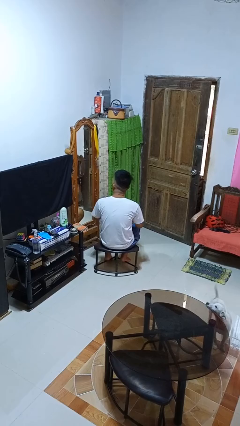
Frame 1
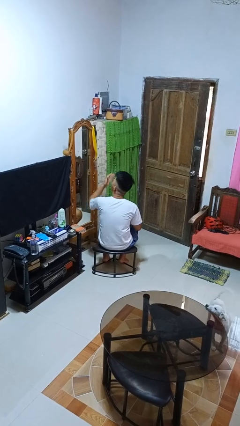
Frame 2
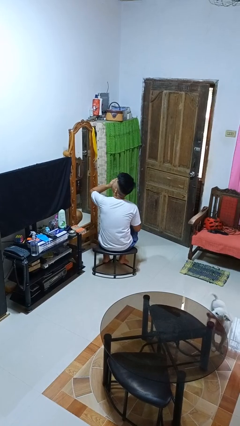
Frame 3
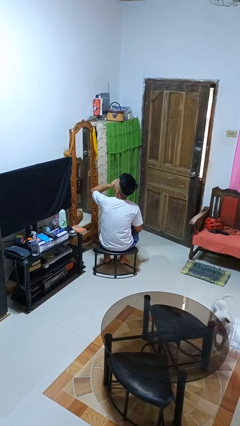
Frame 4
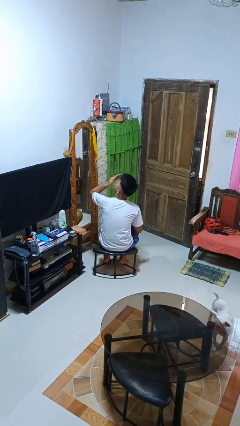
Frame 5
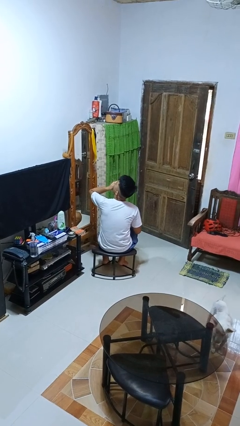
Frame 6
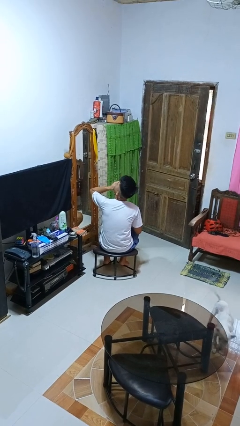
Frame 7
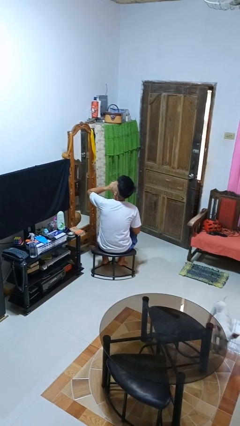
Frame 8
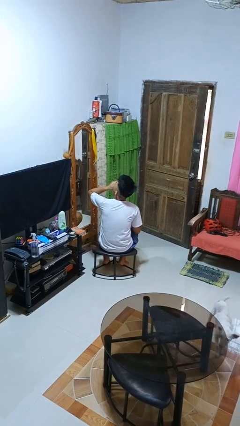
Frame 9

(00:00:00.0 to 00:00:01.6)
person yawns

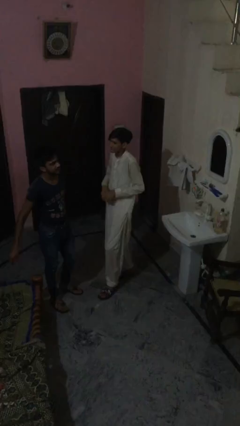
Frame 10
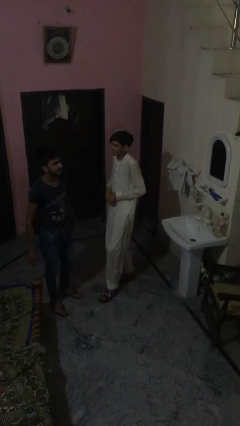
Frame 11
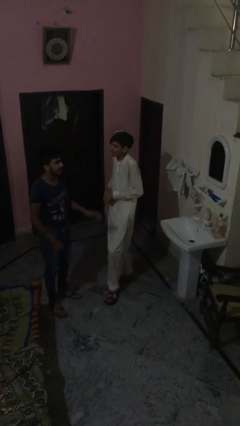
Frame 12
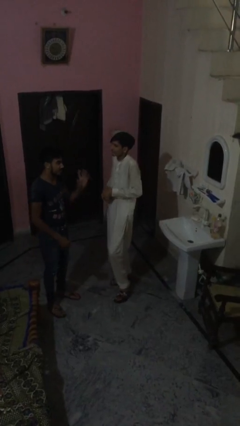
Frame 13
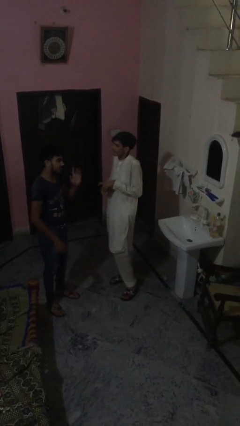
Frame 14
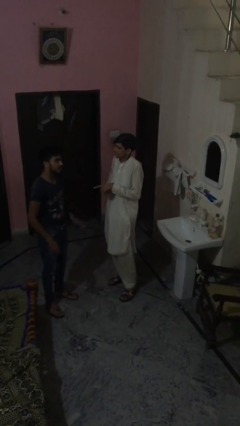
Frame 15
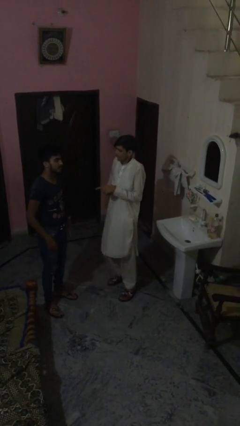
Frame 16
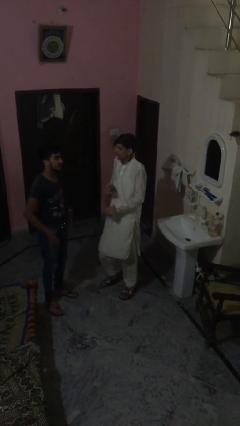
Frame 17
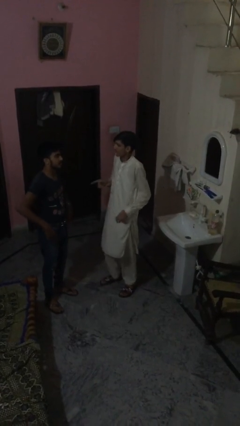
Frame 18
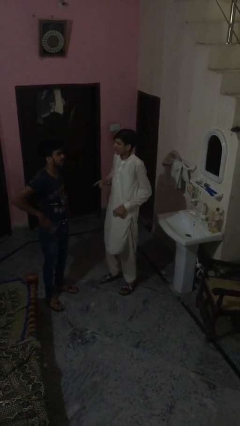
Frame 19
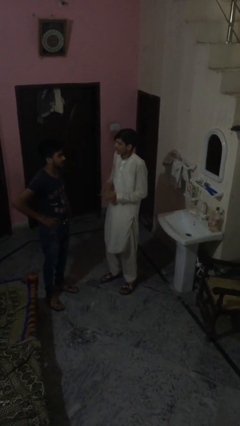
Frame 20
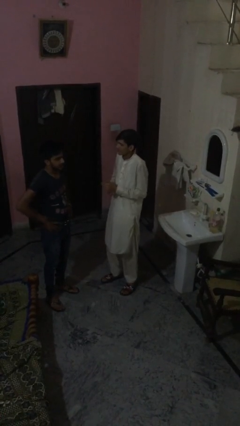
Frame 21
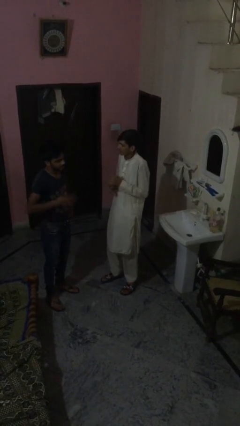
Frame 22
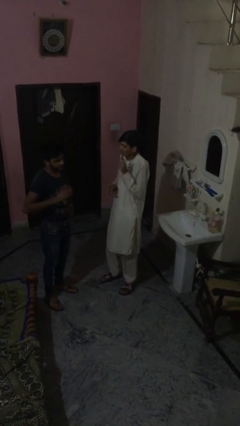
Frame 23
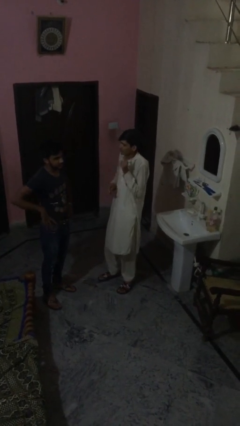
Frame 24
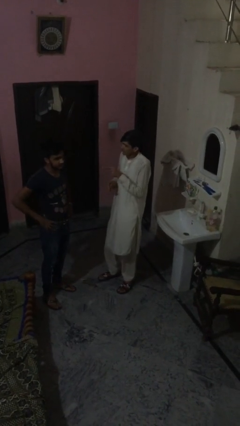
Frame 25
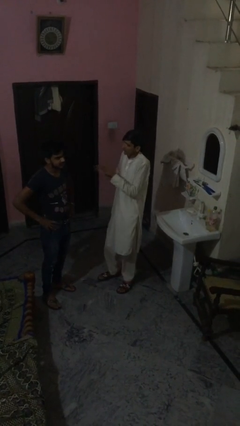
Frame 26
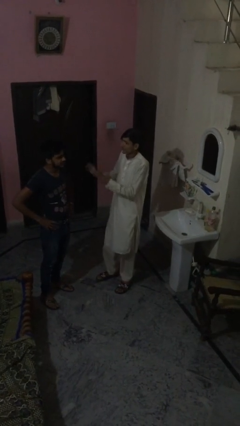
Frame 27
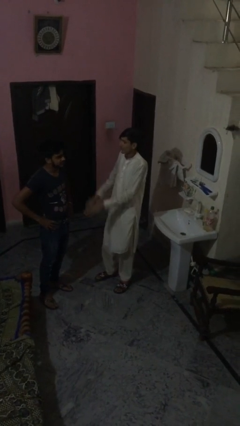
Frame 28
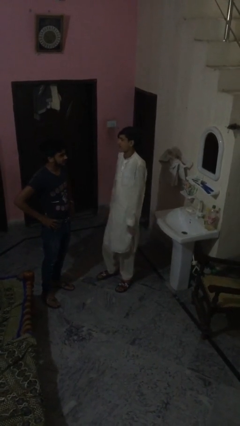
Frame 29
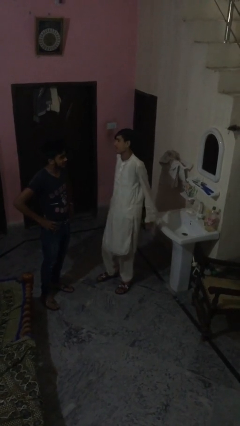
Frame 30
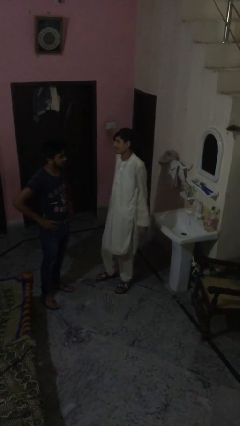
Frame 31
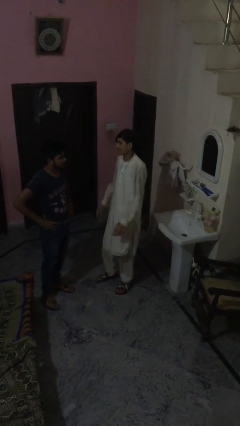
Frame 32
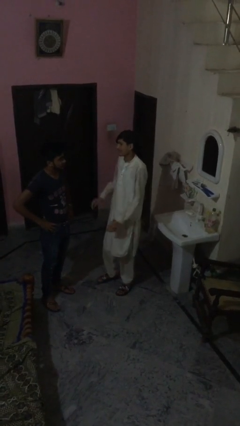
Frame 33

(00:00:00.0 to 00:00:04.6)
person talks to person

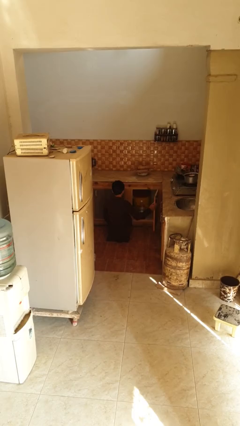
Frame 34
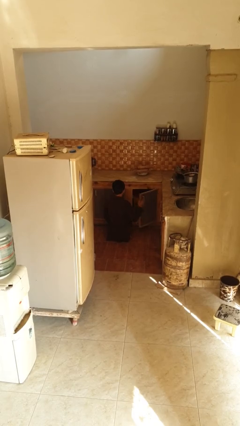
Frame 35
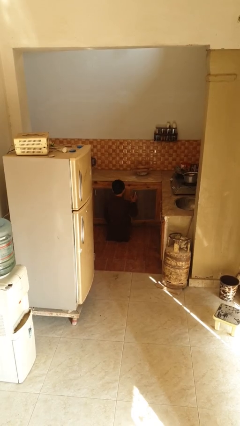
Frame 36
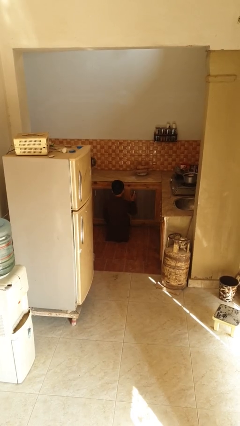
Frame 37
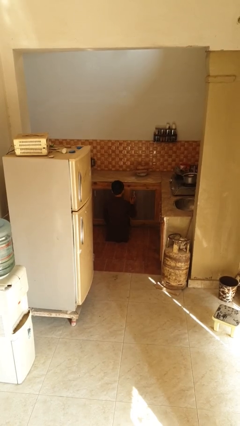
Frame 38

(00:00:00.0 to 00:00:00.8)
person closes kitchen drawer

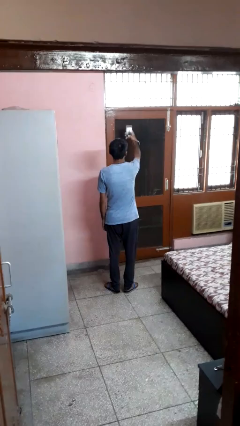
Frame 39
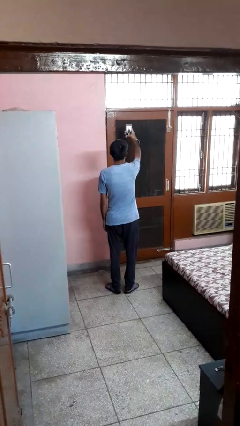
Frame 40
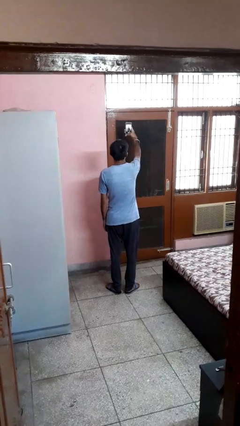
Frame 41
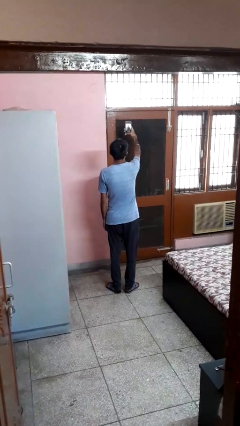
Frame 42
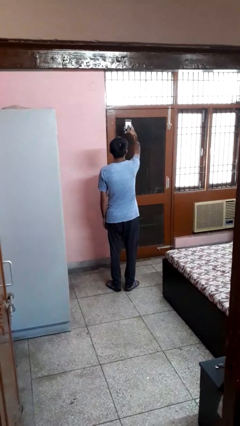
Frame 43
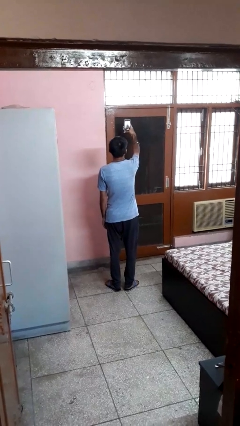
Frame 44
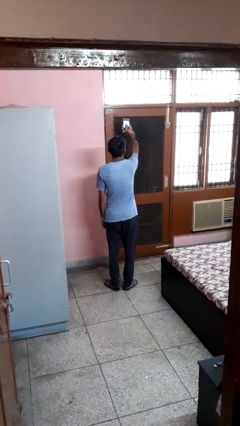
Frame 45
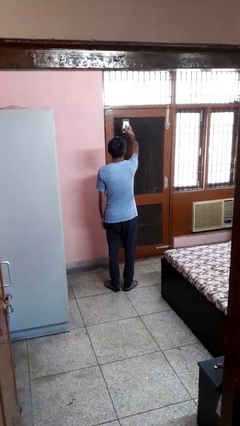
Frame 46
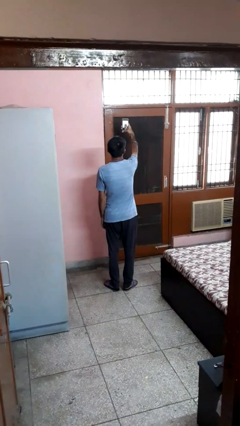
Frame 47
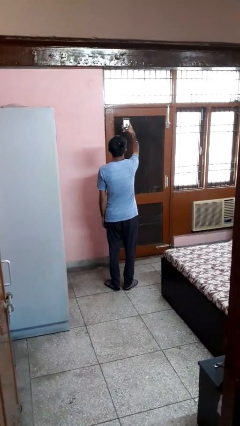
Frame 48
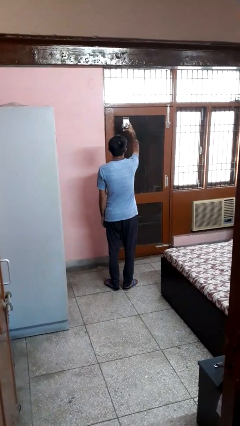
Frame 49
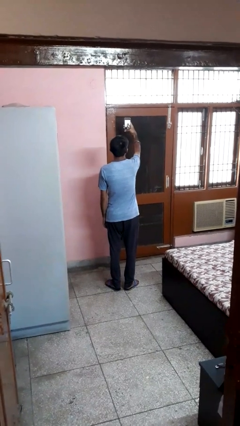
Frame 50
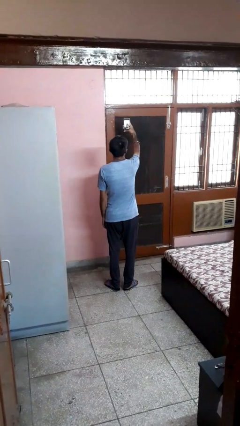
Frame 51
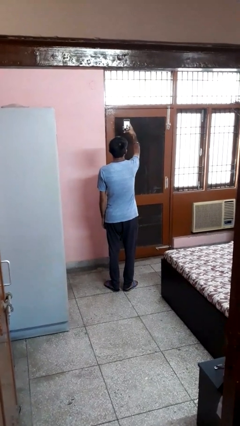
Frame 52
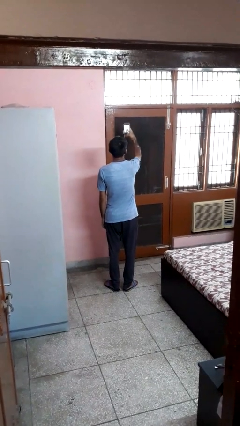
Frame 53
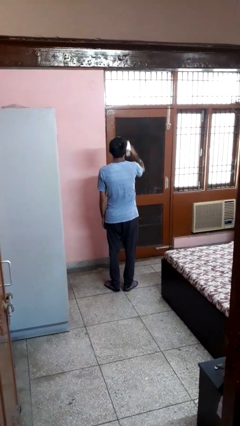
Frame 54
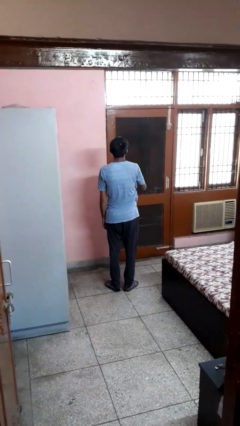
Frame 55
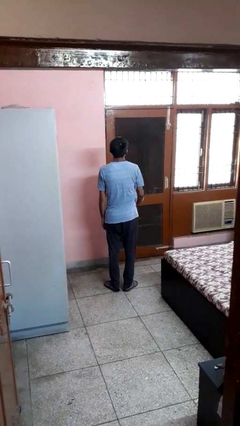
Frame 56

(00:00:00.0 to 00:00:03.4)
person takes selfie

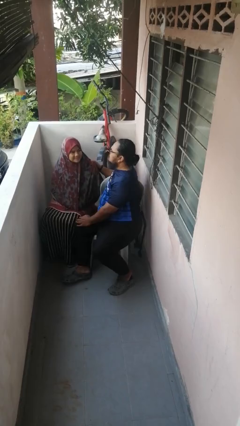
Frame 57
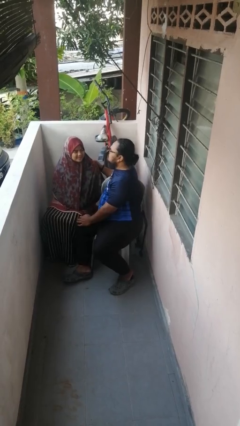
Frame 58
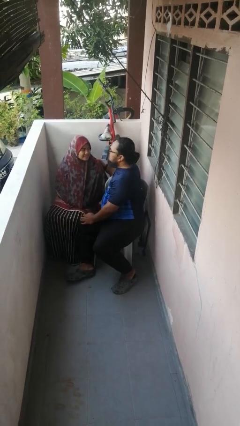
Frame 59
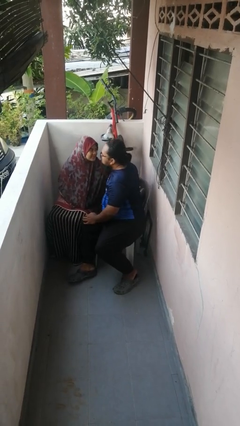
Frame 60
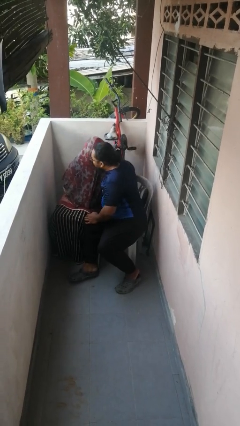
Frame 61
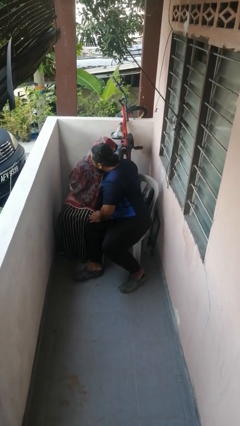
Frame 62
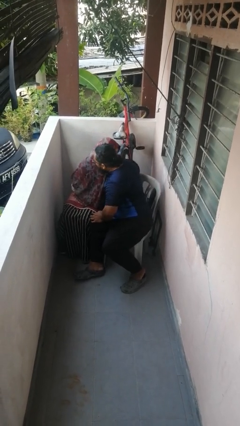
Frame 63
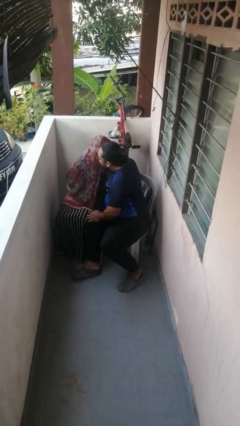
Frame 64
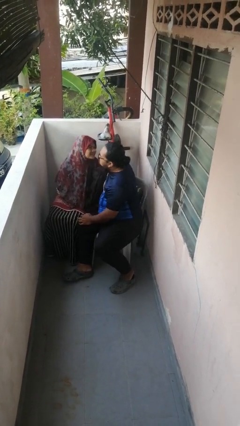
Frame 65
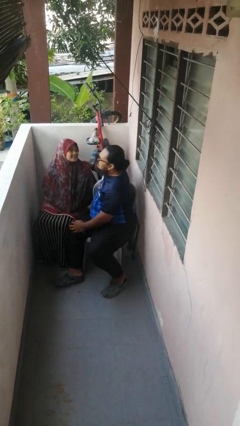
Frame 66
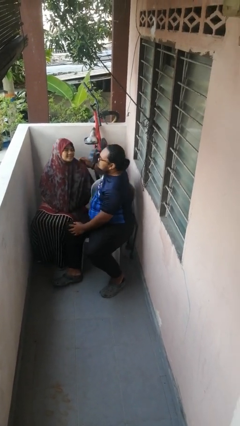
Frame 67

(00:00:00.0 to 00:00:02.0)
person kisses cheek of person

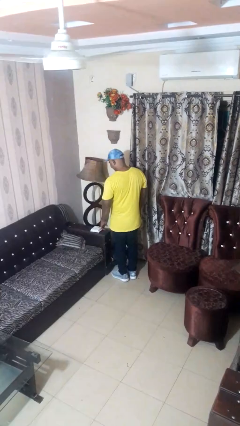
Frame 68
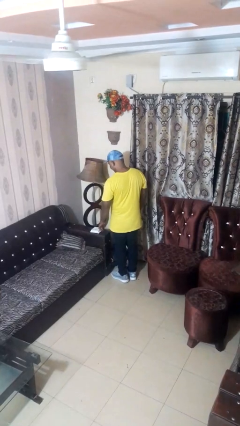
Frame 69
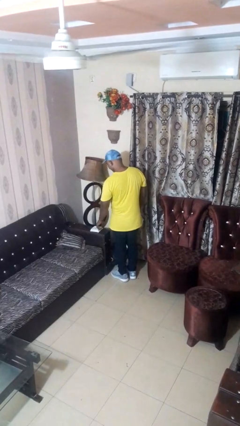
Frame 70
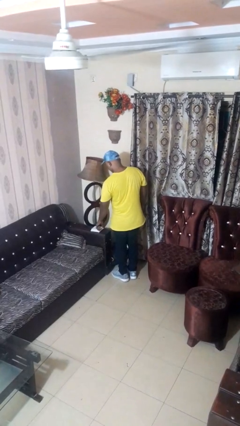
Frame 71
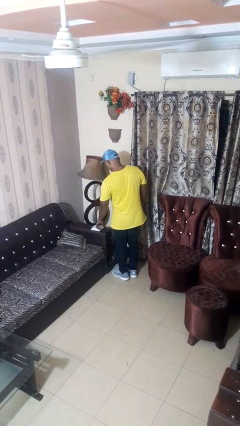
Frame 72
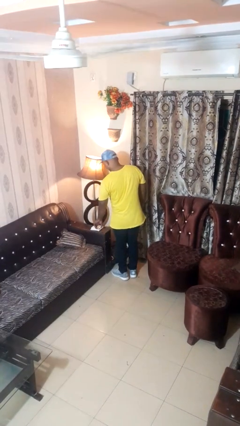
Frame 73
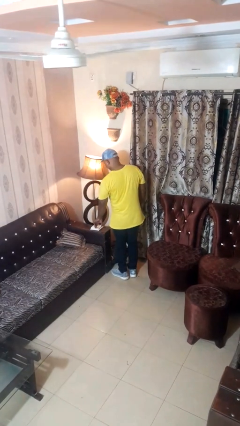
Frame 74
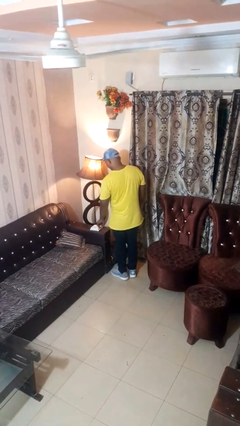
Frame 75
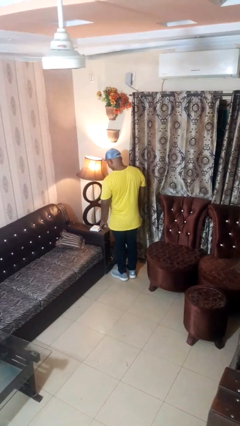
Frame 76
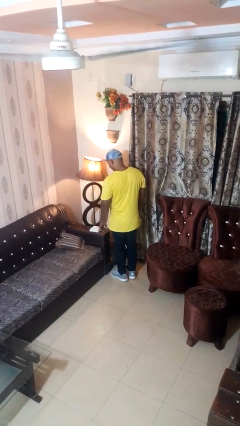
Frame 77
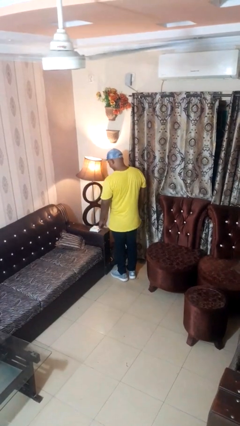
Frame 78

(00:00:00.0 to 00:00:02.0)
person turns on lamp

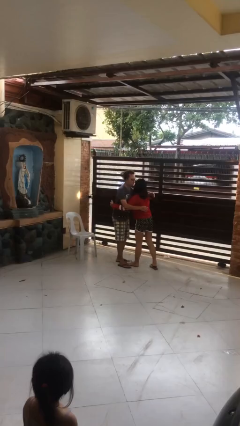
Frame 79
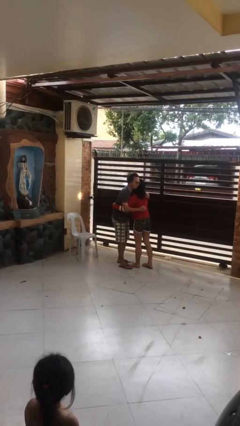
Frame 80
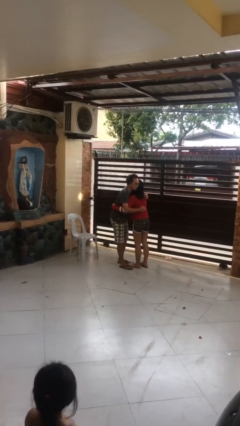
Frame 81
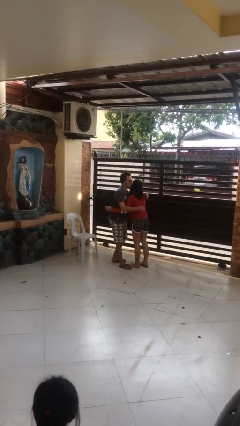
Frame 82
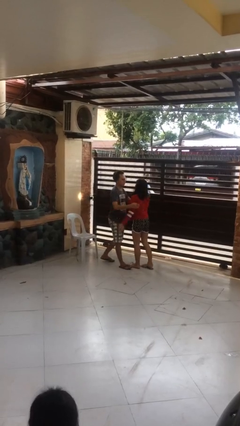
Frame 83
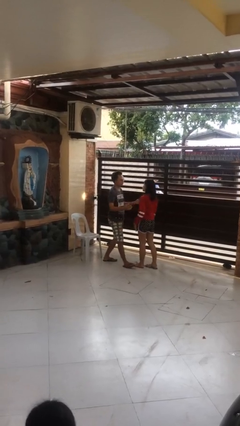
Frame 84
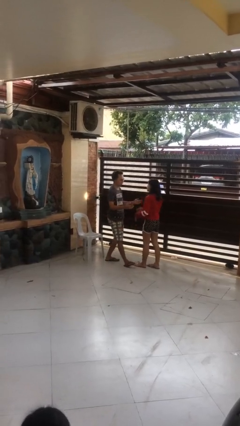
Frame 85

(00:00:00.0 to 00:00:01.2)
person embraces person

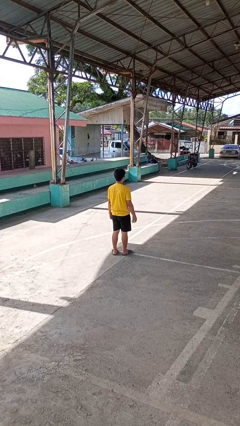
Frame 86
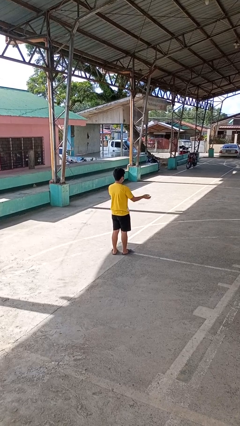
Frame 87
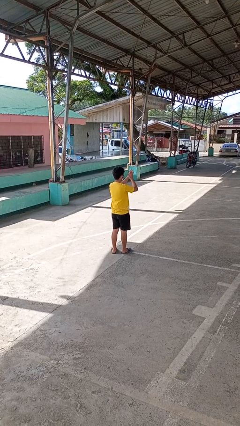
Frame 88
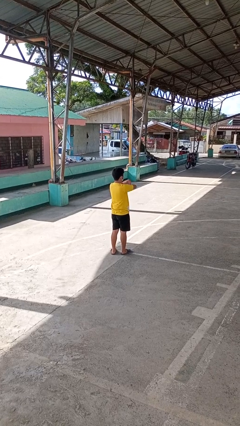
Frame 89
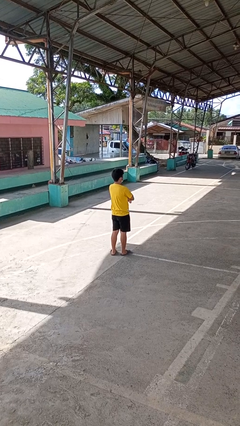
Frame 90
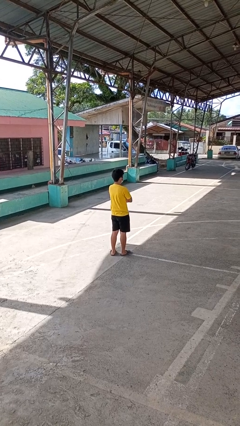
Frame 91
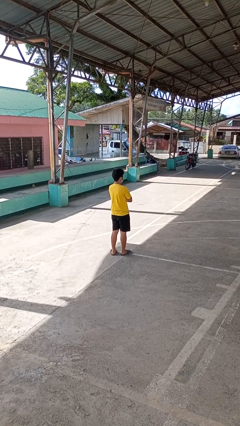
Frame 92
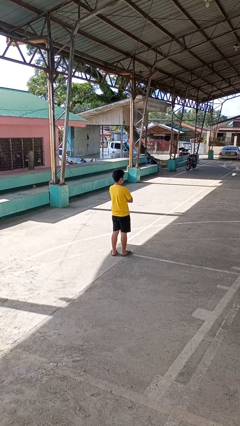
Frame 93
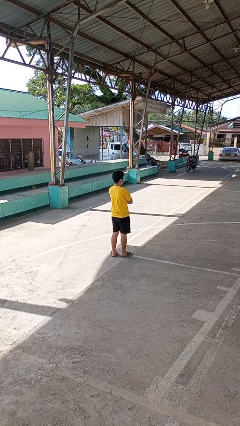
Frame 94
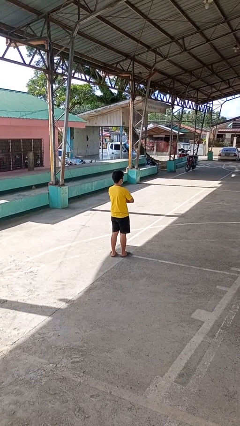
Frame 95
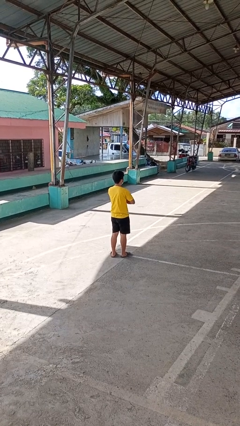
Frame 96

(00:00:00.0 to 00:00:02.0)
person crosses arms
